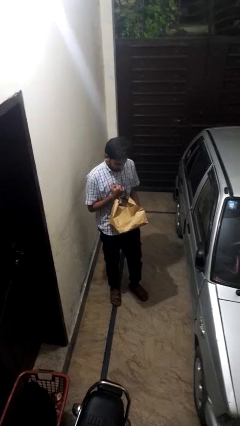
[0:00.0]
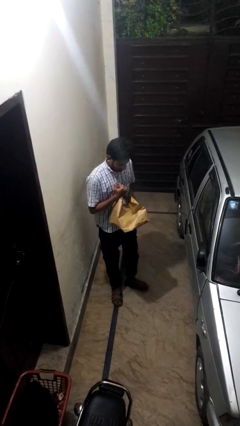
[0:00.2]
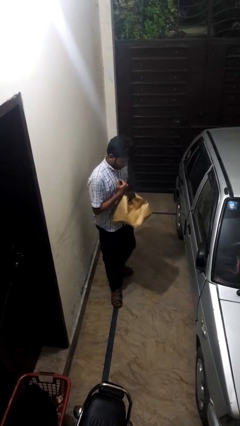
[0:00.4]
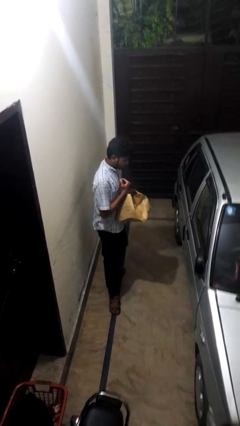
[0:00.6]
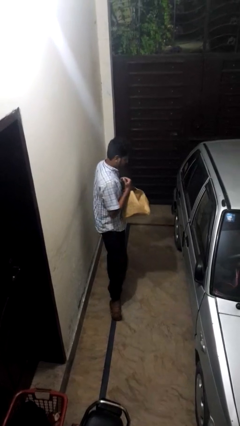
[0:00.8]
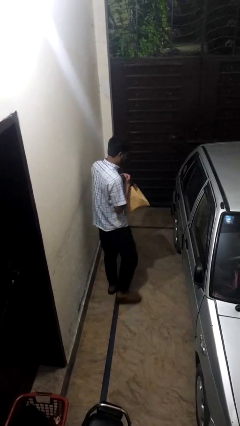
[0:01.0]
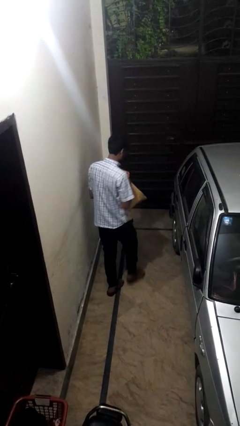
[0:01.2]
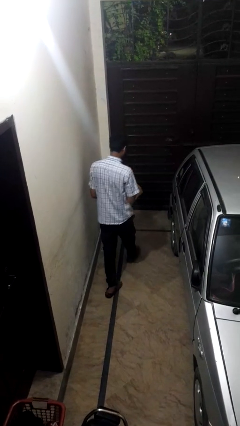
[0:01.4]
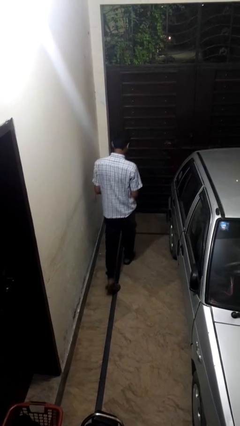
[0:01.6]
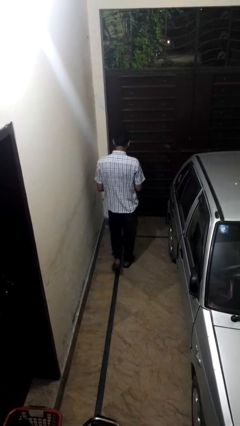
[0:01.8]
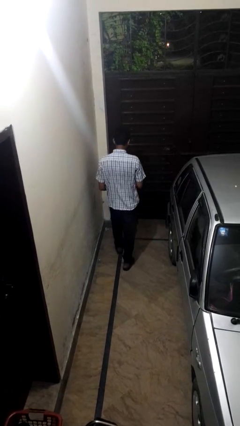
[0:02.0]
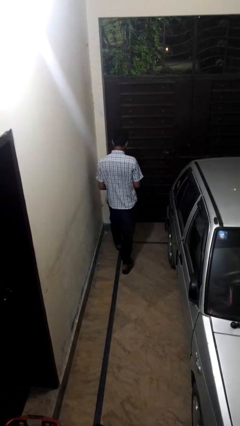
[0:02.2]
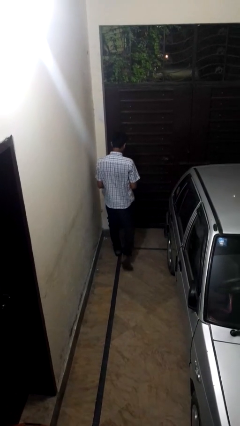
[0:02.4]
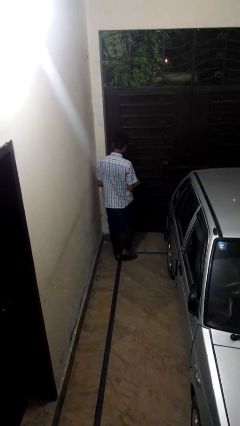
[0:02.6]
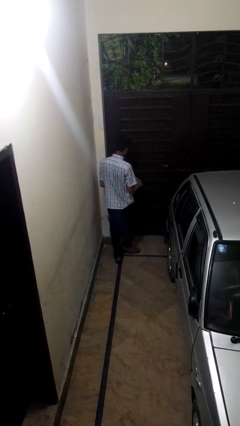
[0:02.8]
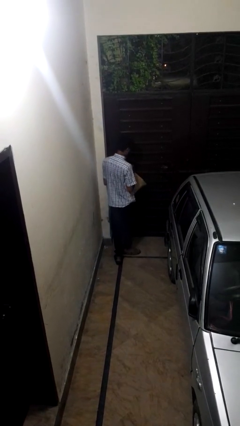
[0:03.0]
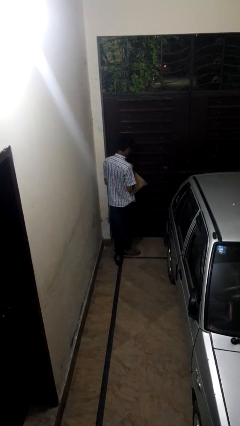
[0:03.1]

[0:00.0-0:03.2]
person carries groceries

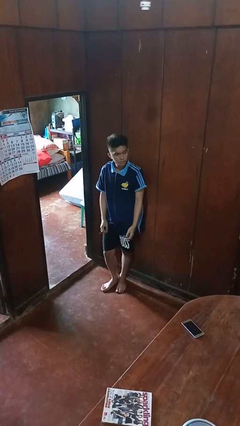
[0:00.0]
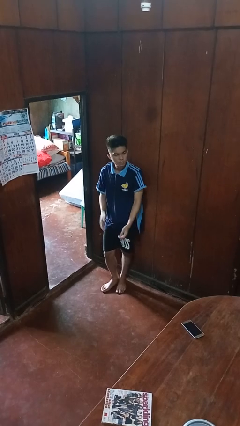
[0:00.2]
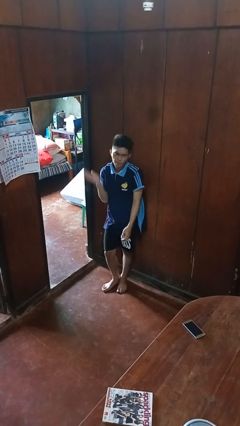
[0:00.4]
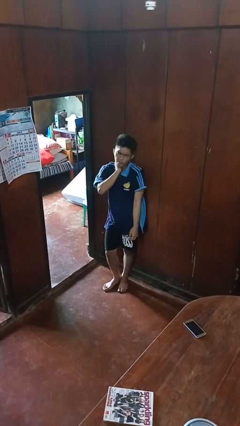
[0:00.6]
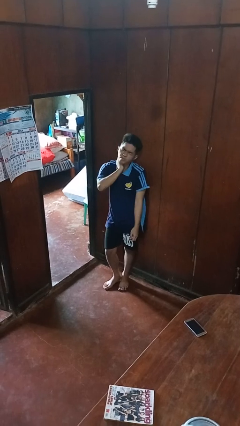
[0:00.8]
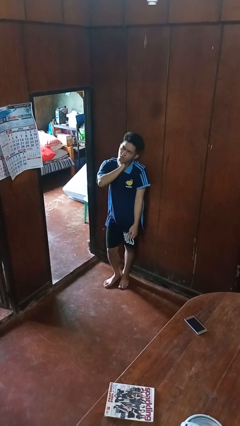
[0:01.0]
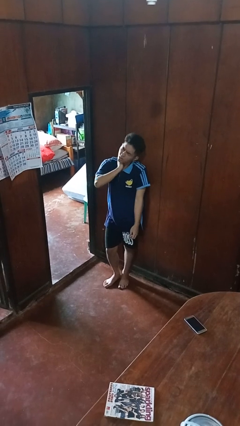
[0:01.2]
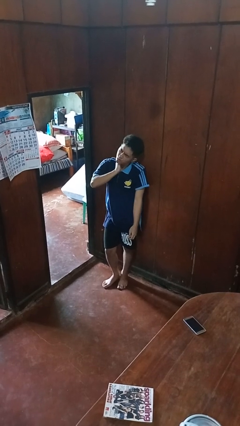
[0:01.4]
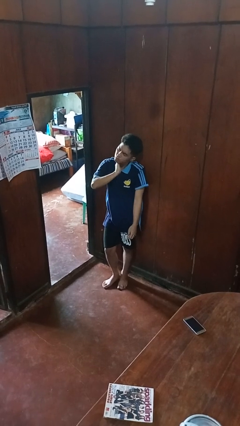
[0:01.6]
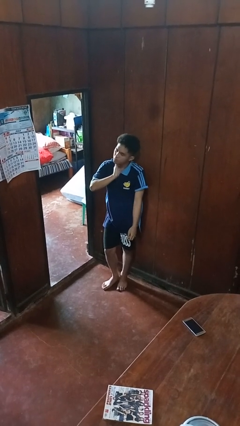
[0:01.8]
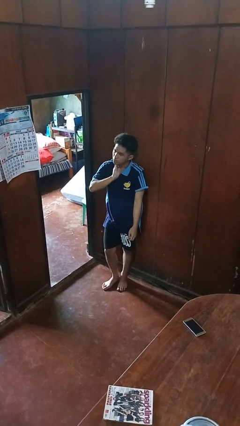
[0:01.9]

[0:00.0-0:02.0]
person swats bug

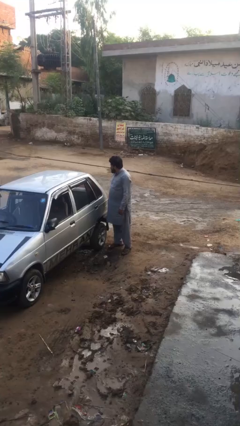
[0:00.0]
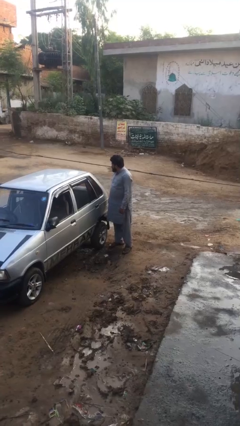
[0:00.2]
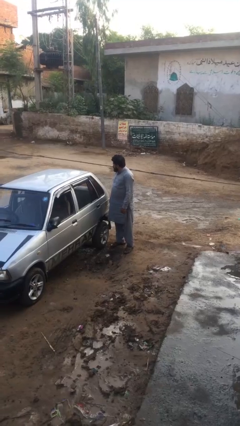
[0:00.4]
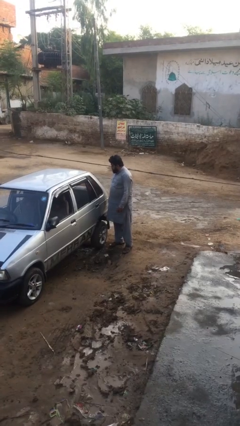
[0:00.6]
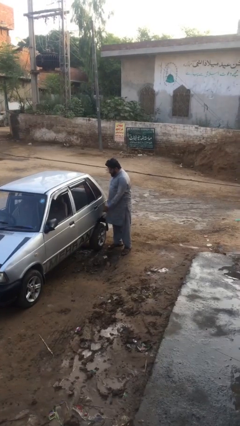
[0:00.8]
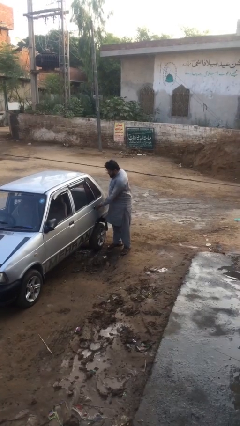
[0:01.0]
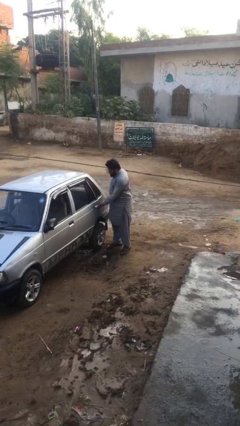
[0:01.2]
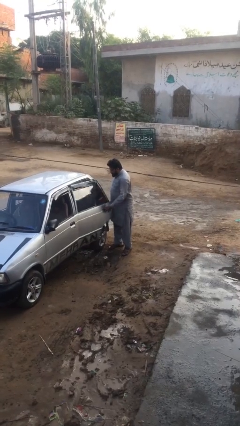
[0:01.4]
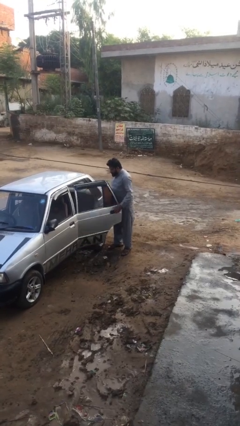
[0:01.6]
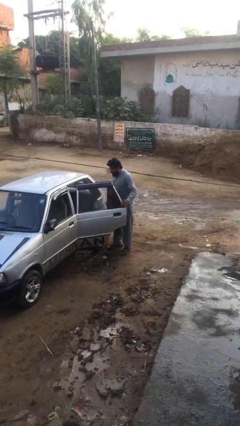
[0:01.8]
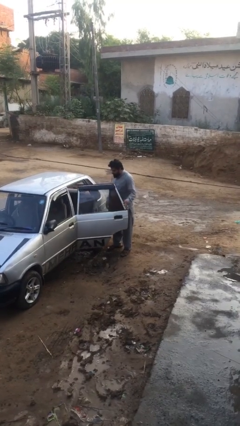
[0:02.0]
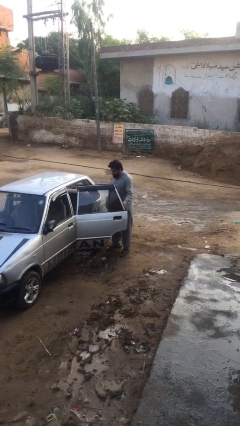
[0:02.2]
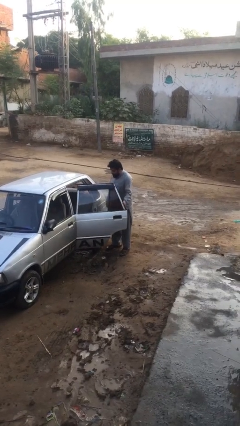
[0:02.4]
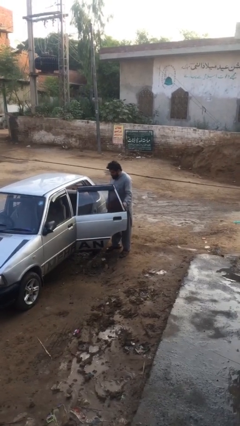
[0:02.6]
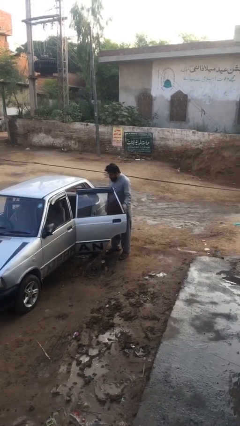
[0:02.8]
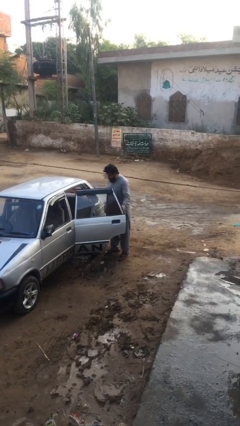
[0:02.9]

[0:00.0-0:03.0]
person opens car door

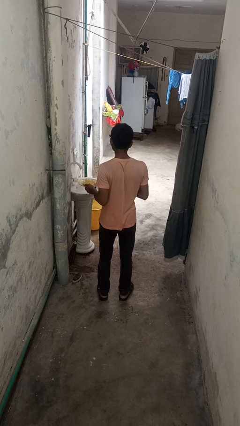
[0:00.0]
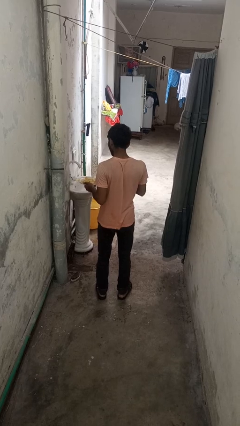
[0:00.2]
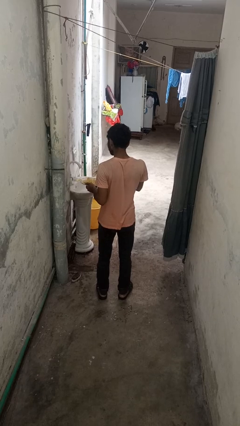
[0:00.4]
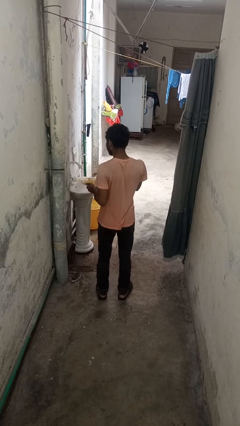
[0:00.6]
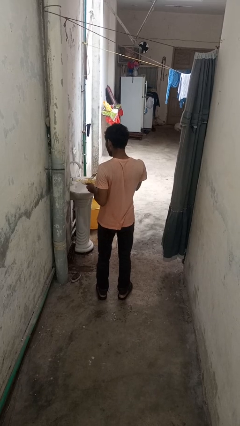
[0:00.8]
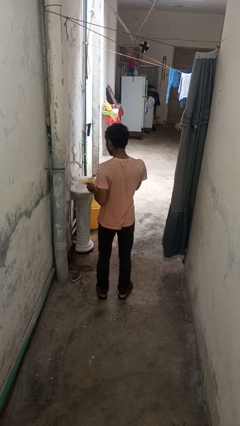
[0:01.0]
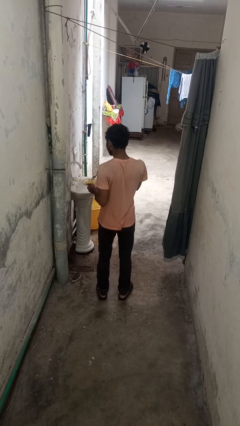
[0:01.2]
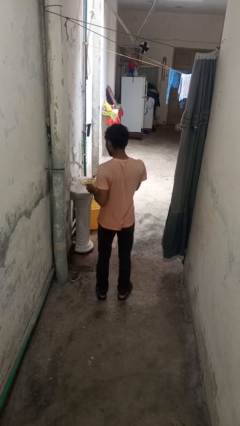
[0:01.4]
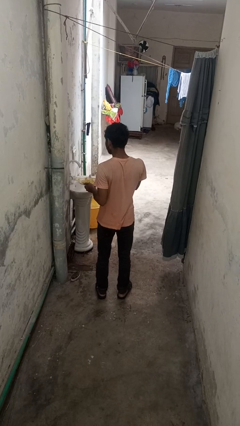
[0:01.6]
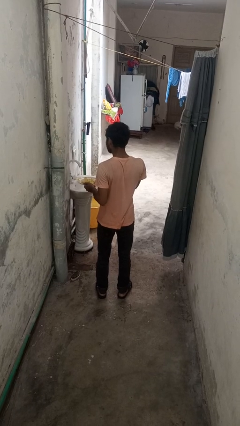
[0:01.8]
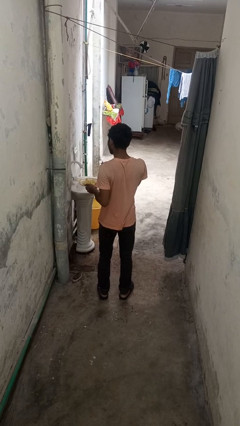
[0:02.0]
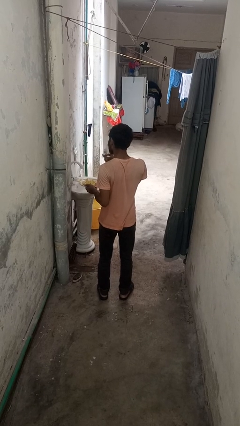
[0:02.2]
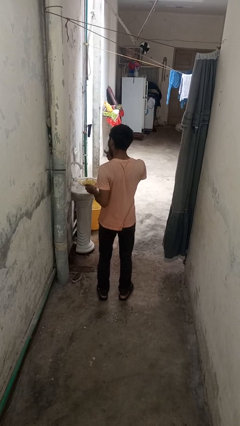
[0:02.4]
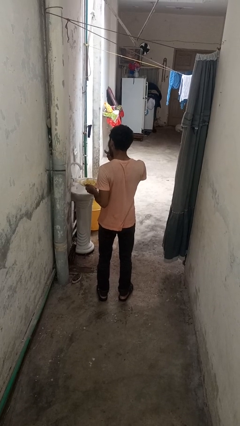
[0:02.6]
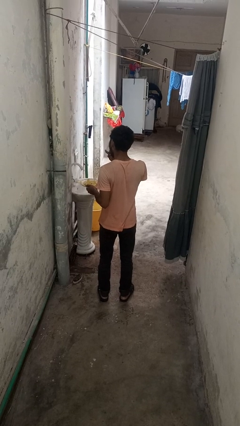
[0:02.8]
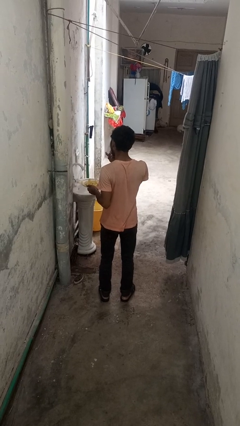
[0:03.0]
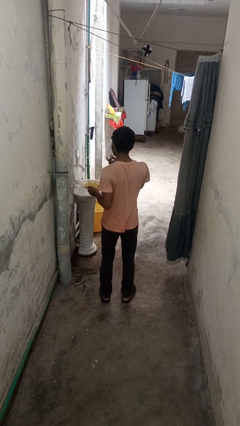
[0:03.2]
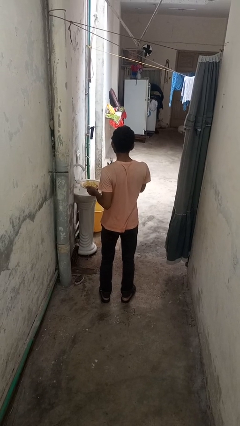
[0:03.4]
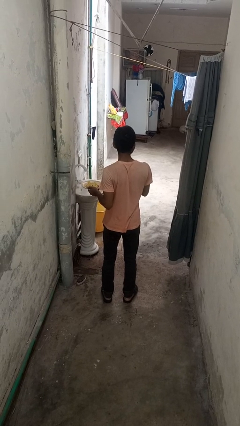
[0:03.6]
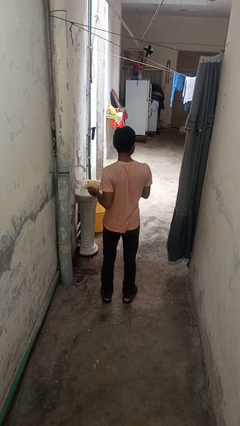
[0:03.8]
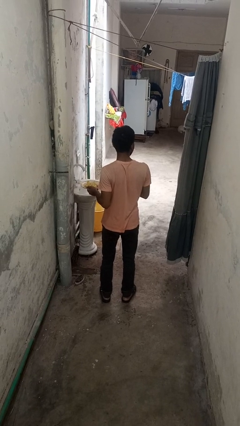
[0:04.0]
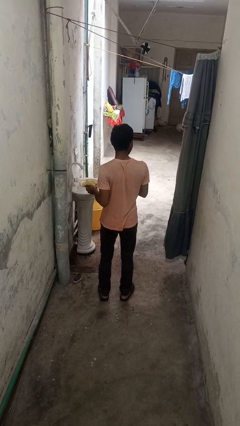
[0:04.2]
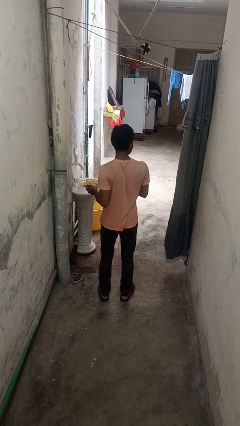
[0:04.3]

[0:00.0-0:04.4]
person eats with utensil

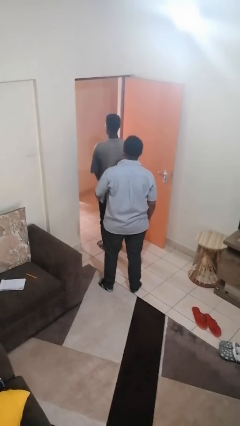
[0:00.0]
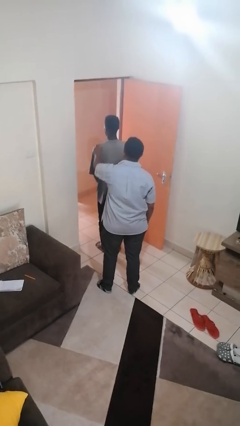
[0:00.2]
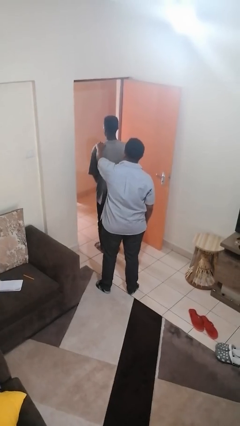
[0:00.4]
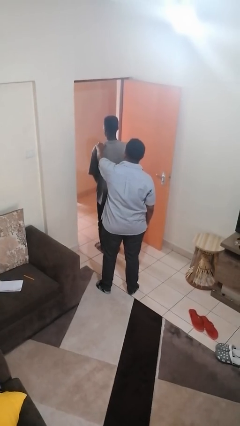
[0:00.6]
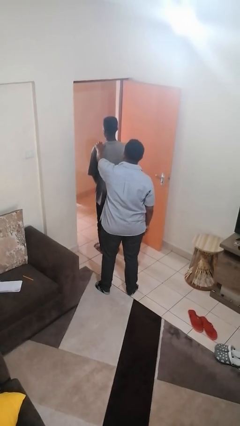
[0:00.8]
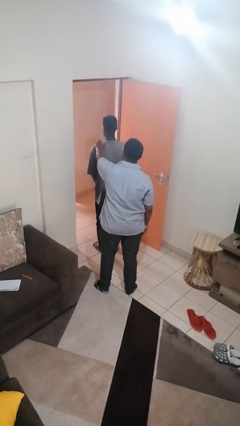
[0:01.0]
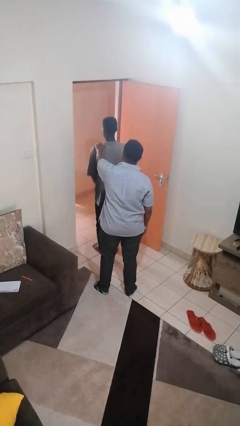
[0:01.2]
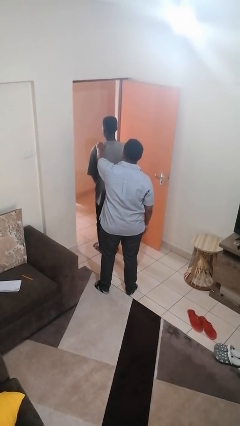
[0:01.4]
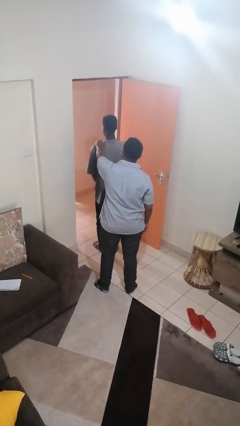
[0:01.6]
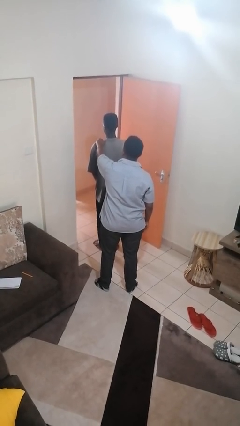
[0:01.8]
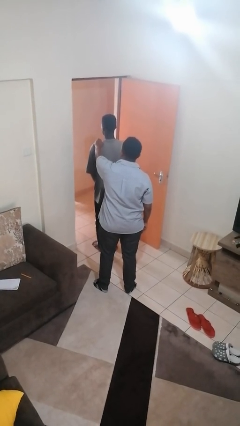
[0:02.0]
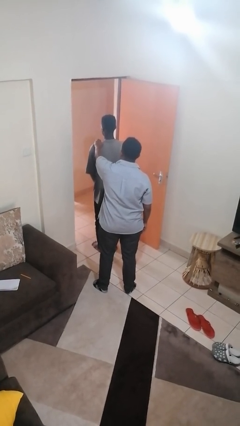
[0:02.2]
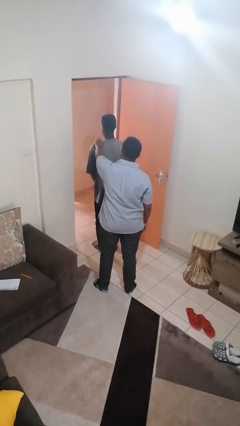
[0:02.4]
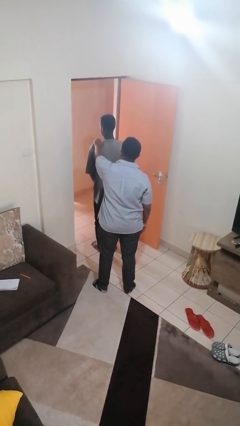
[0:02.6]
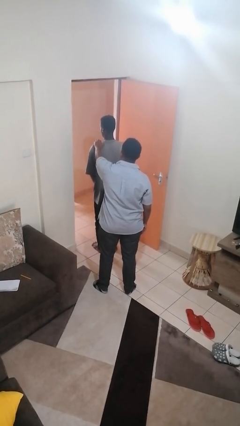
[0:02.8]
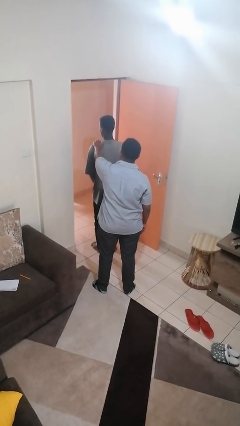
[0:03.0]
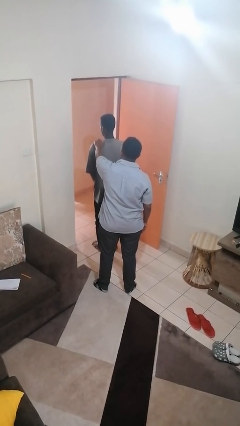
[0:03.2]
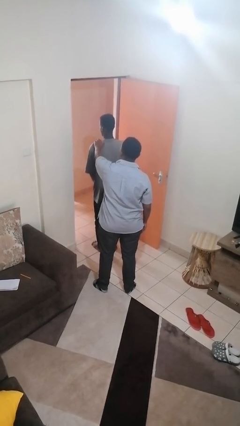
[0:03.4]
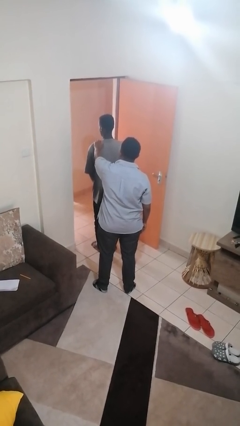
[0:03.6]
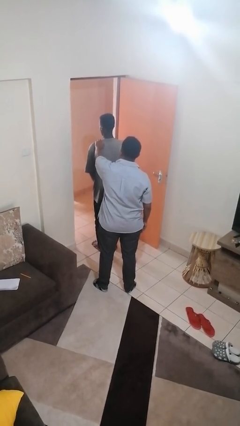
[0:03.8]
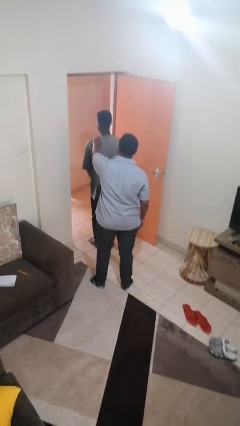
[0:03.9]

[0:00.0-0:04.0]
person touches back of person

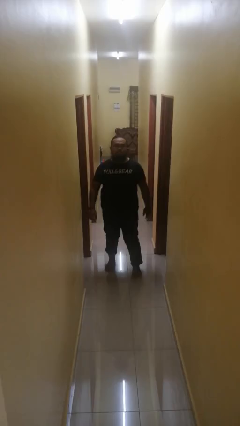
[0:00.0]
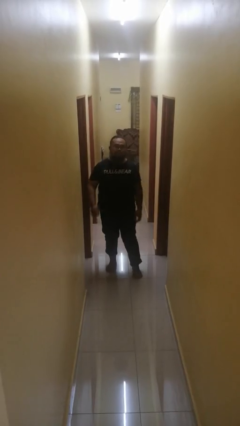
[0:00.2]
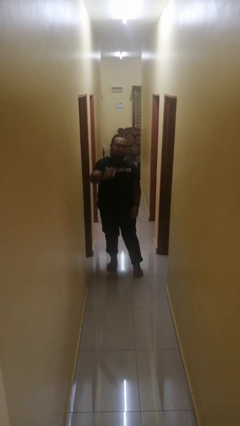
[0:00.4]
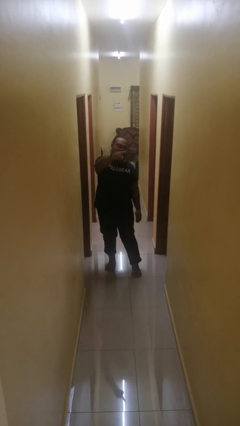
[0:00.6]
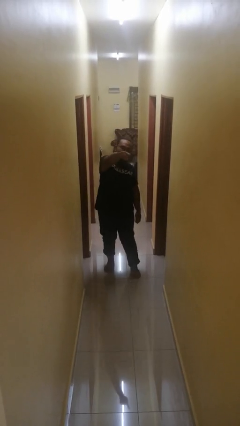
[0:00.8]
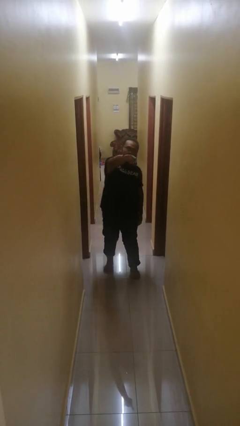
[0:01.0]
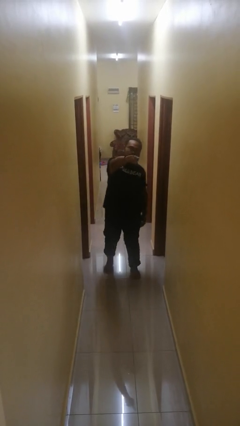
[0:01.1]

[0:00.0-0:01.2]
person points at person
